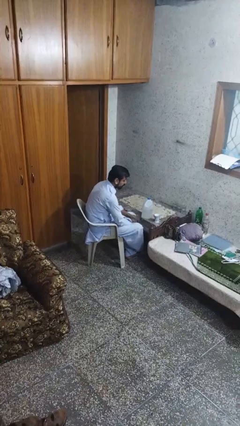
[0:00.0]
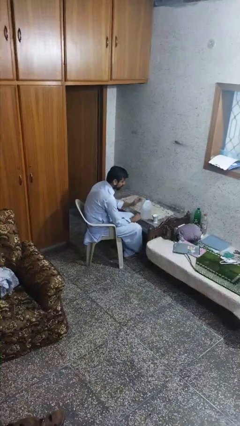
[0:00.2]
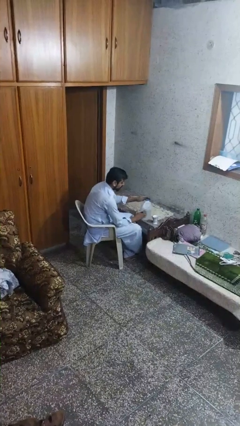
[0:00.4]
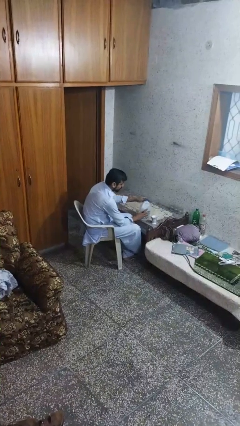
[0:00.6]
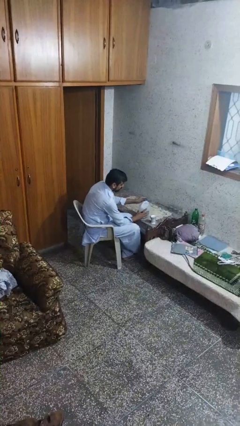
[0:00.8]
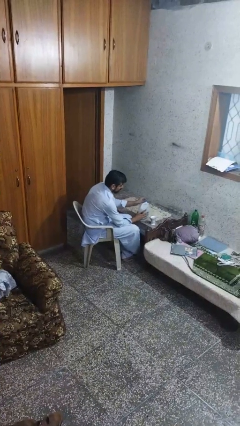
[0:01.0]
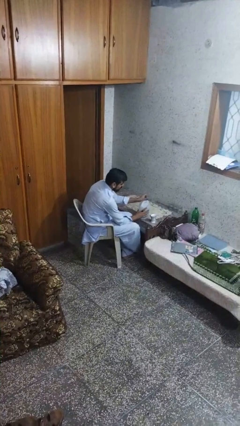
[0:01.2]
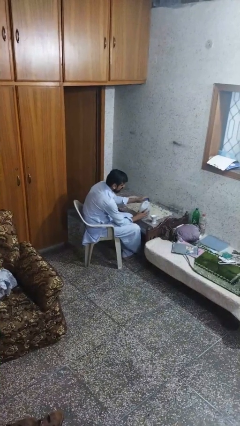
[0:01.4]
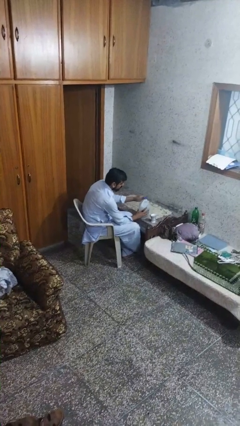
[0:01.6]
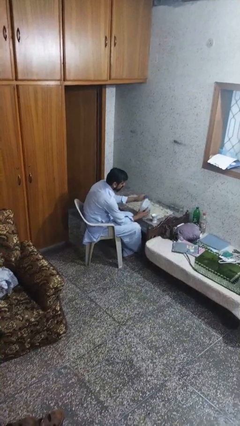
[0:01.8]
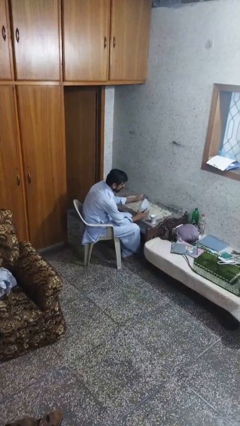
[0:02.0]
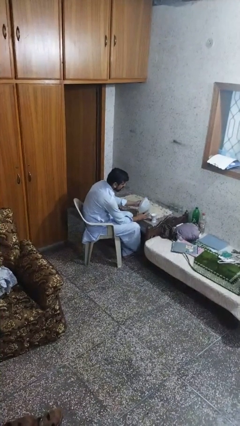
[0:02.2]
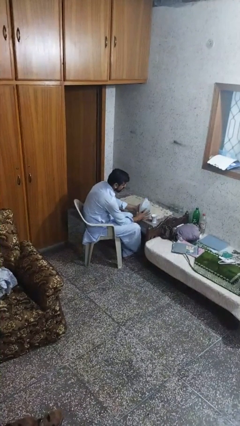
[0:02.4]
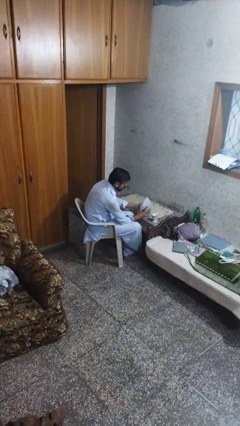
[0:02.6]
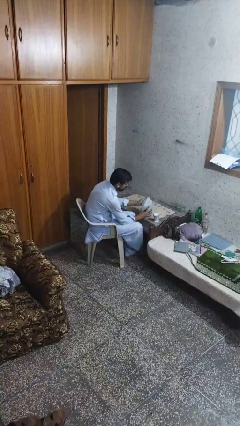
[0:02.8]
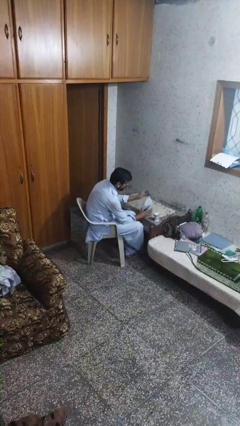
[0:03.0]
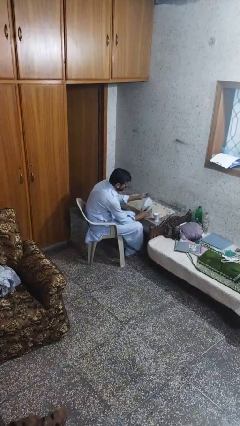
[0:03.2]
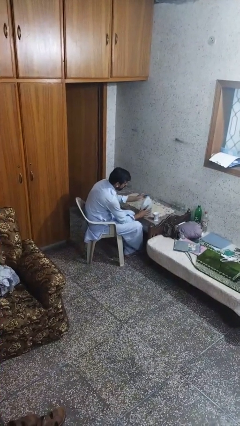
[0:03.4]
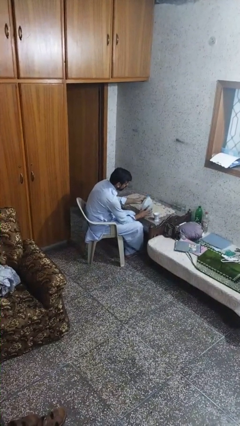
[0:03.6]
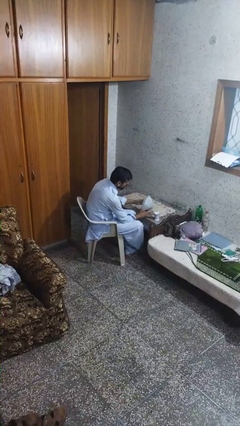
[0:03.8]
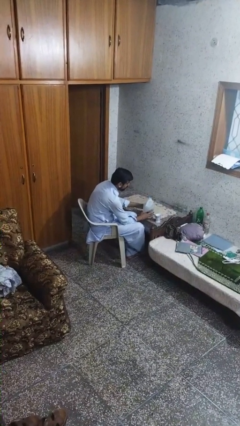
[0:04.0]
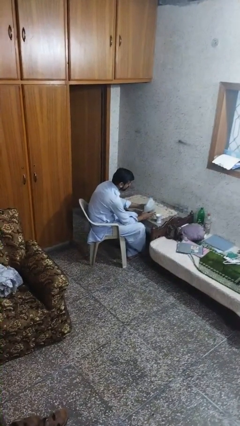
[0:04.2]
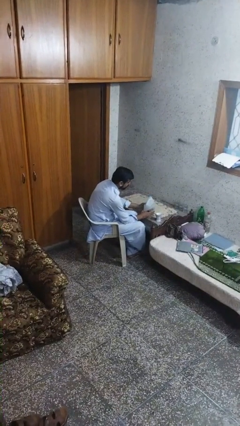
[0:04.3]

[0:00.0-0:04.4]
person unscrews lid from bottle

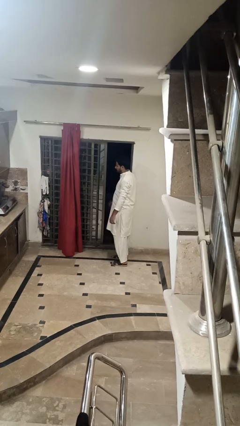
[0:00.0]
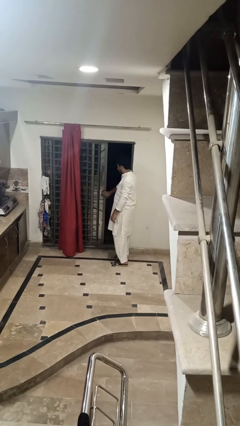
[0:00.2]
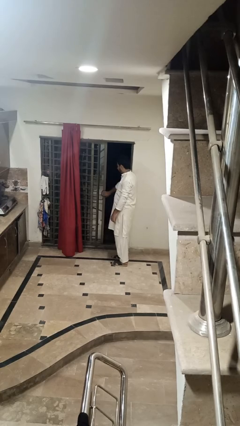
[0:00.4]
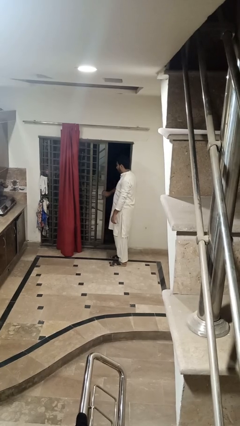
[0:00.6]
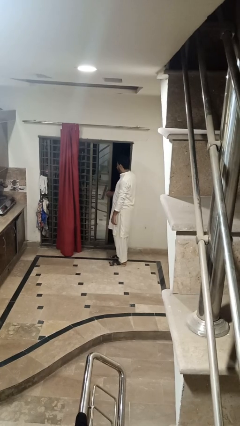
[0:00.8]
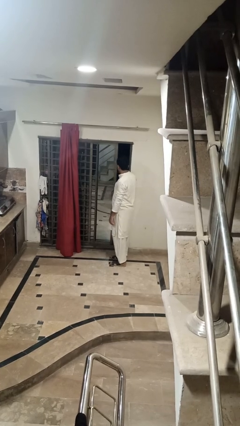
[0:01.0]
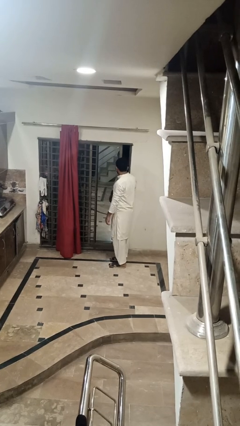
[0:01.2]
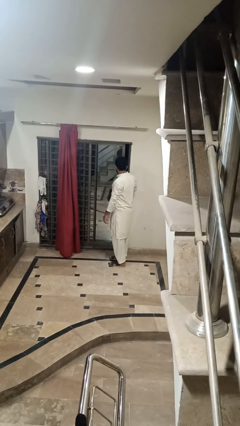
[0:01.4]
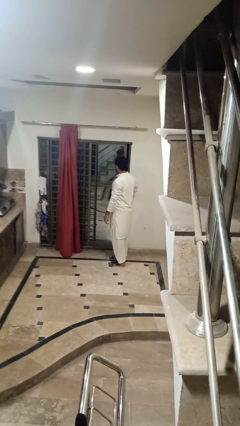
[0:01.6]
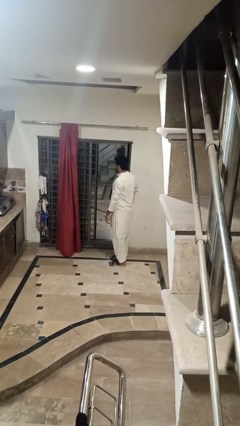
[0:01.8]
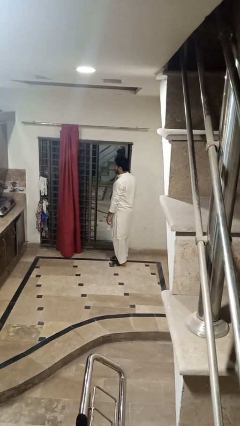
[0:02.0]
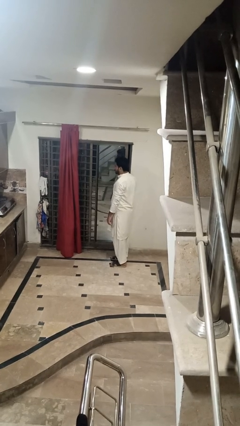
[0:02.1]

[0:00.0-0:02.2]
person closes home window

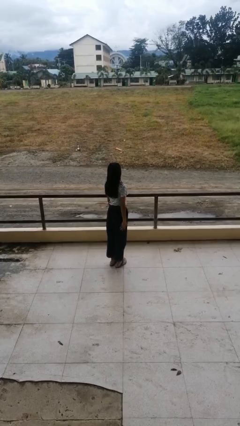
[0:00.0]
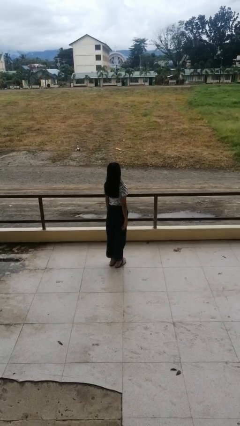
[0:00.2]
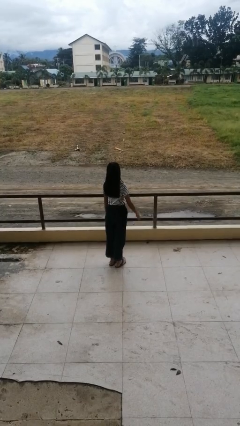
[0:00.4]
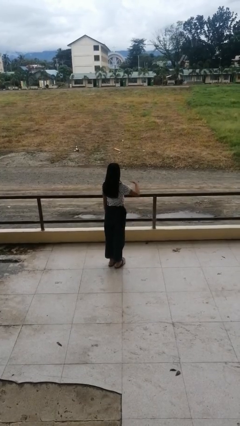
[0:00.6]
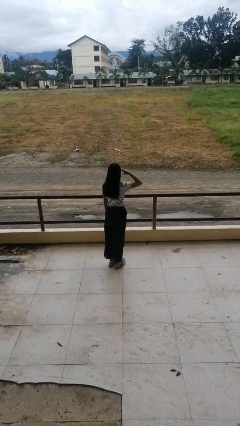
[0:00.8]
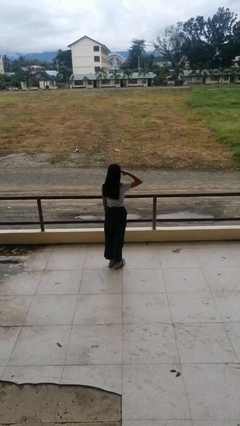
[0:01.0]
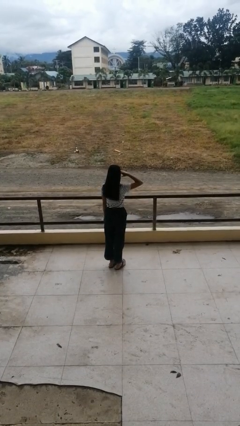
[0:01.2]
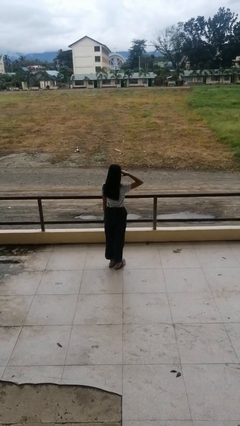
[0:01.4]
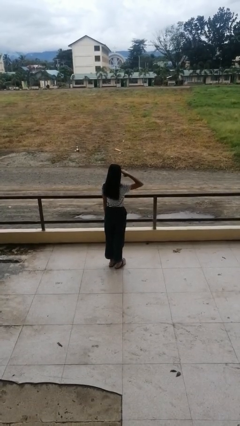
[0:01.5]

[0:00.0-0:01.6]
person salutes

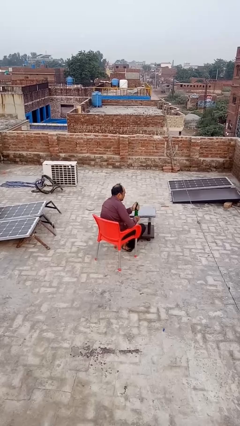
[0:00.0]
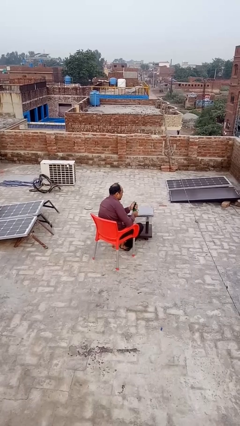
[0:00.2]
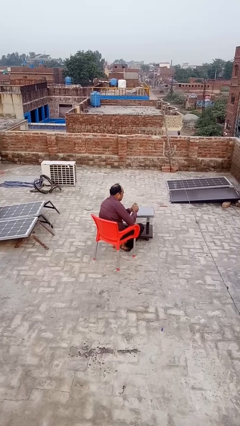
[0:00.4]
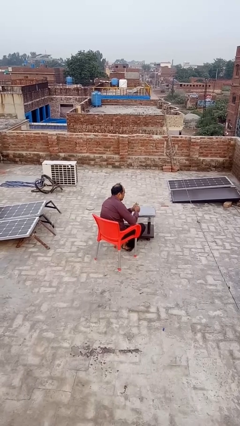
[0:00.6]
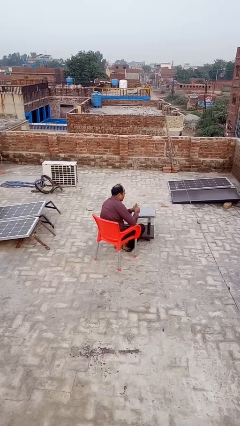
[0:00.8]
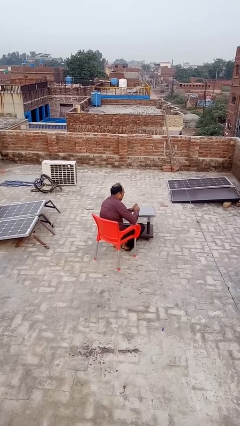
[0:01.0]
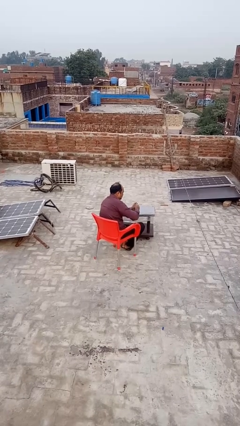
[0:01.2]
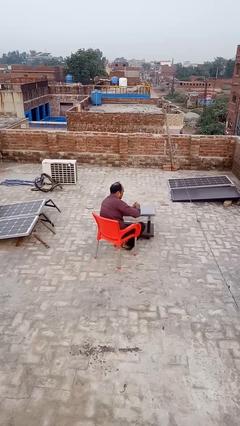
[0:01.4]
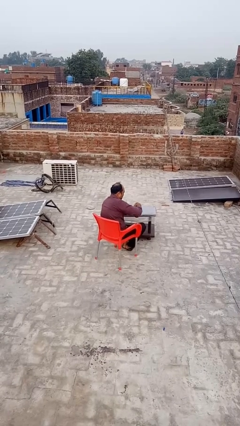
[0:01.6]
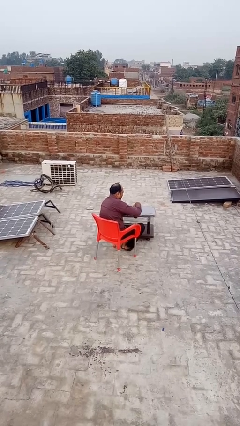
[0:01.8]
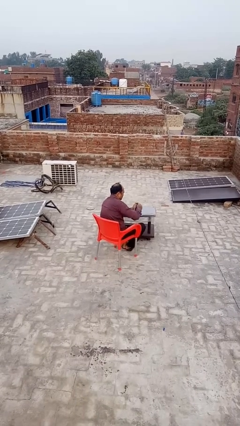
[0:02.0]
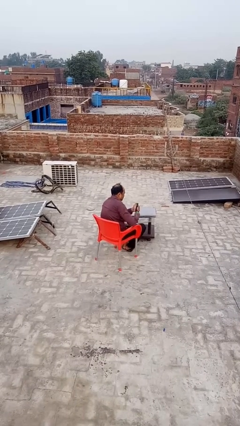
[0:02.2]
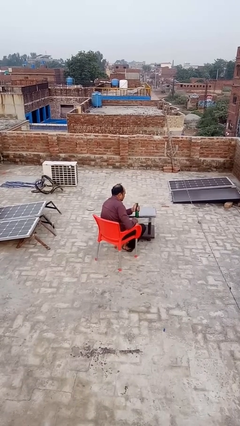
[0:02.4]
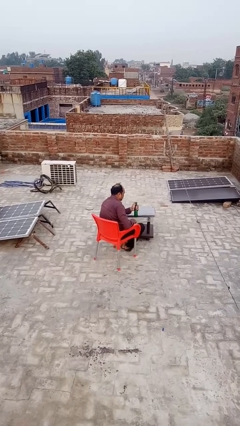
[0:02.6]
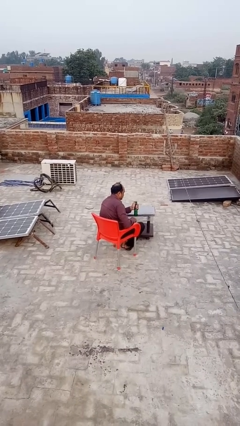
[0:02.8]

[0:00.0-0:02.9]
person opens can with can opener

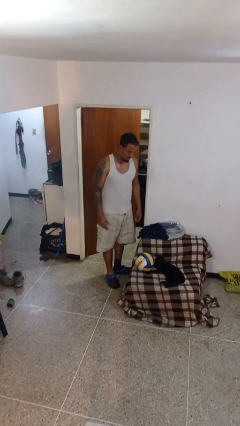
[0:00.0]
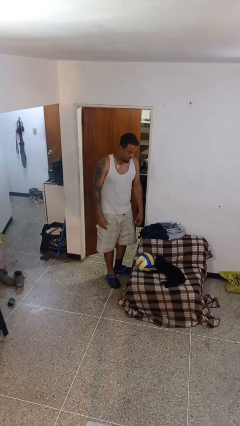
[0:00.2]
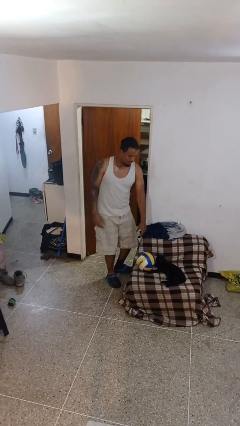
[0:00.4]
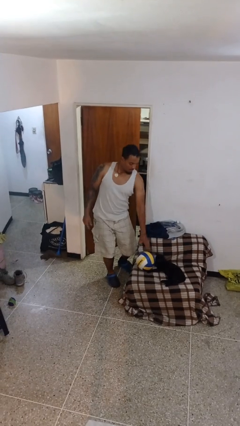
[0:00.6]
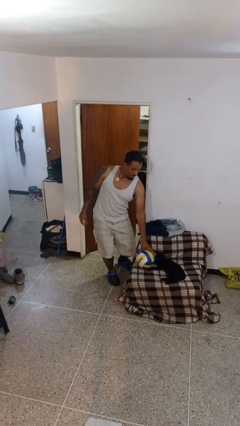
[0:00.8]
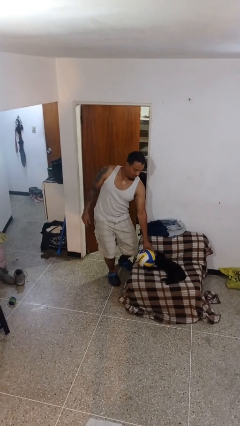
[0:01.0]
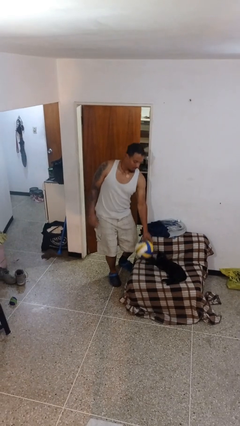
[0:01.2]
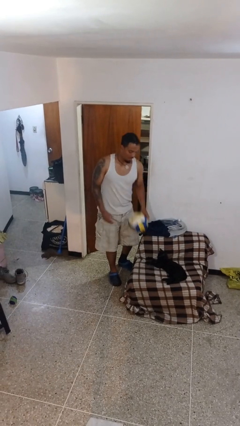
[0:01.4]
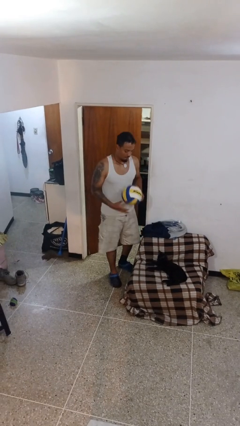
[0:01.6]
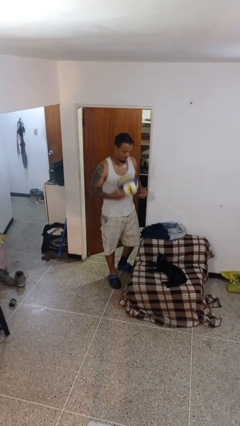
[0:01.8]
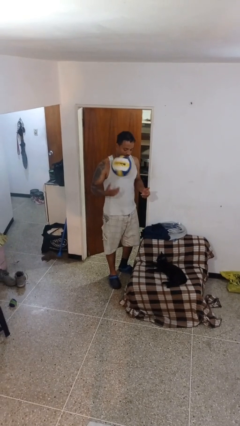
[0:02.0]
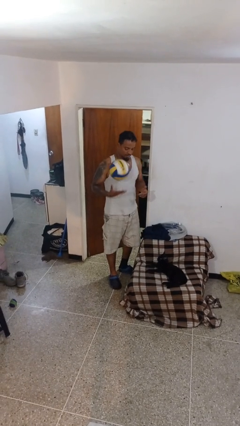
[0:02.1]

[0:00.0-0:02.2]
person picks up object from couch

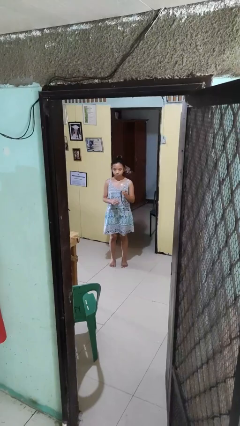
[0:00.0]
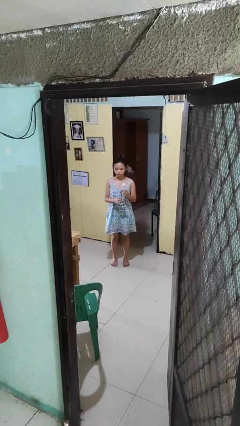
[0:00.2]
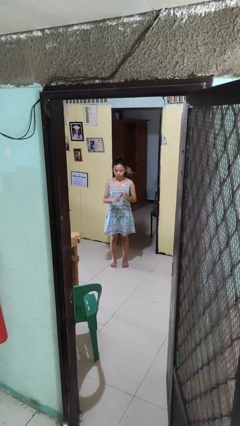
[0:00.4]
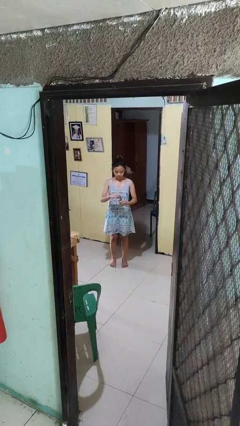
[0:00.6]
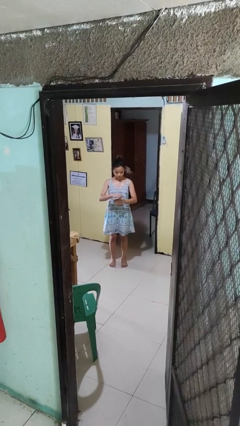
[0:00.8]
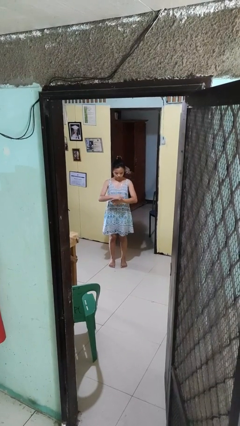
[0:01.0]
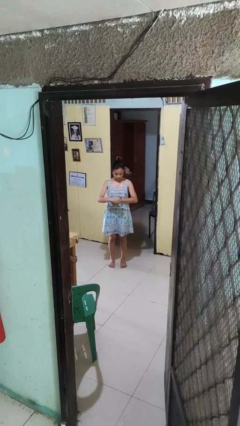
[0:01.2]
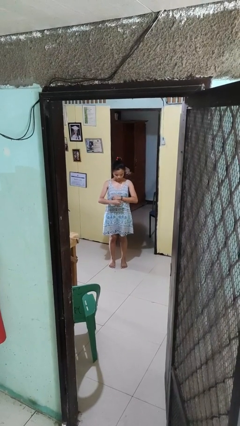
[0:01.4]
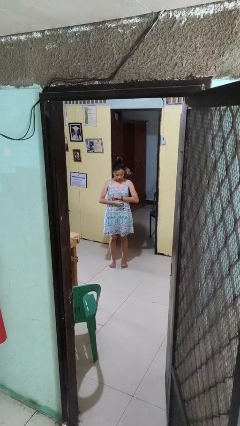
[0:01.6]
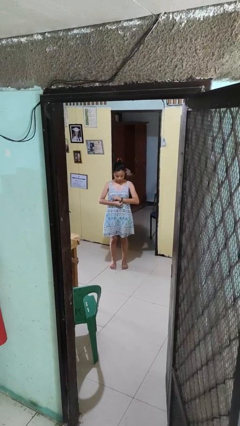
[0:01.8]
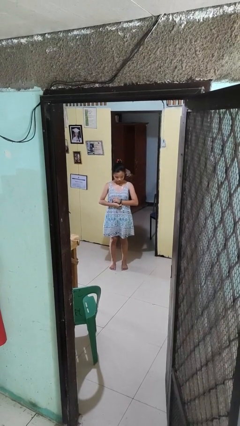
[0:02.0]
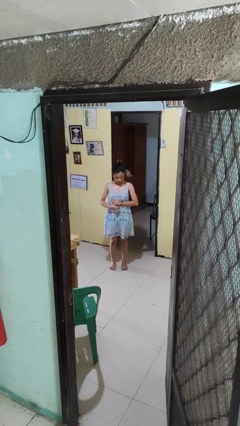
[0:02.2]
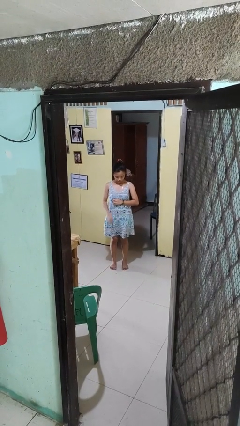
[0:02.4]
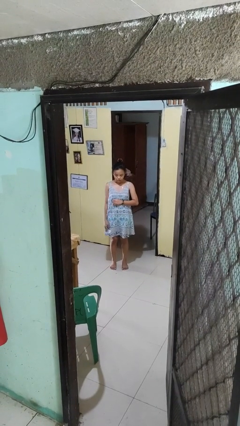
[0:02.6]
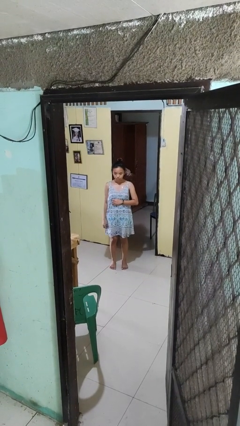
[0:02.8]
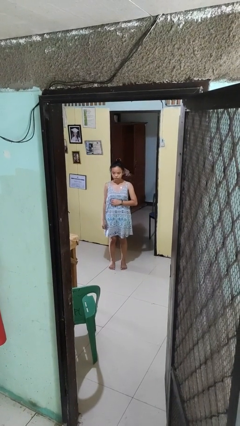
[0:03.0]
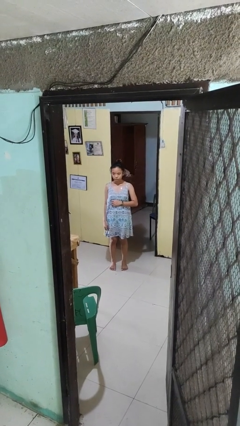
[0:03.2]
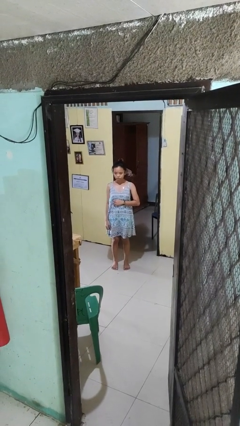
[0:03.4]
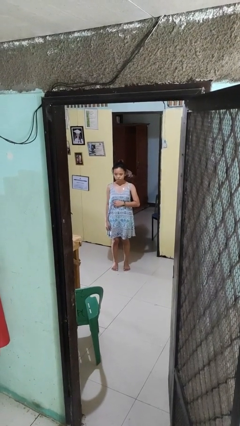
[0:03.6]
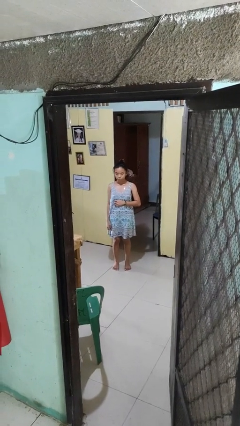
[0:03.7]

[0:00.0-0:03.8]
person puts on wristwatch

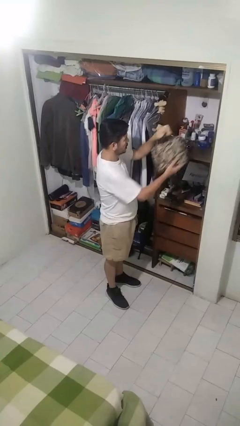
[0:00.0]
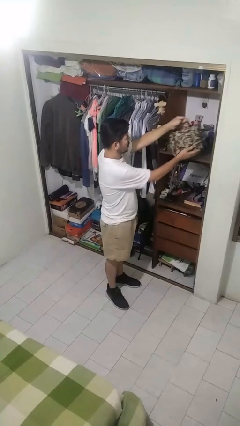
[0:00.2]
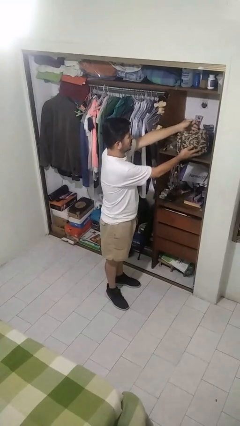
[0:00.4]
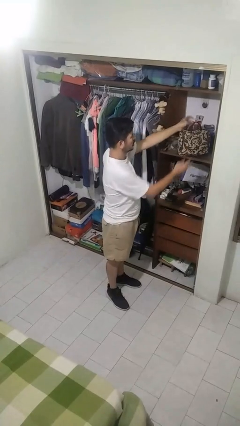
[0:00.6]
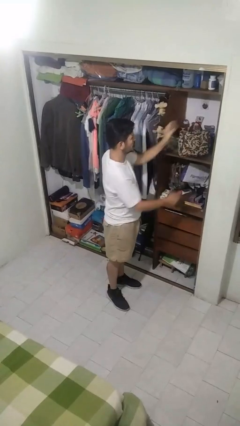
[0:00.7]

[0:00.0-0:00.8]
person picks up object from shelf
